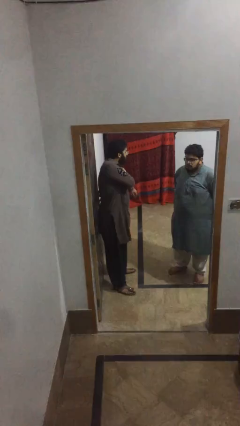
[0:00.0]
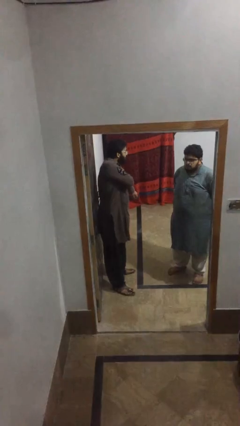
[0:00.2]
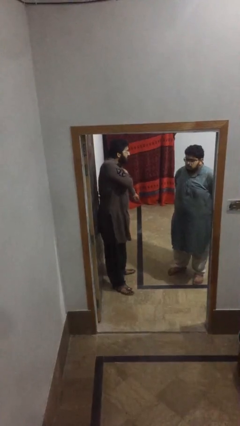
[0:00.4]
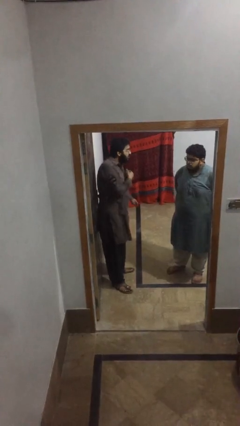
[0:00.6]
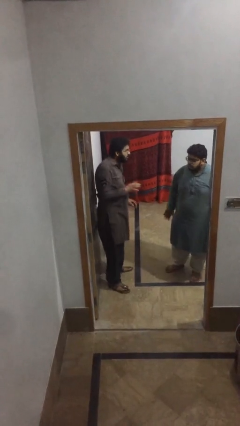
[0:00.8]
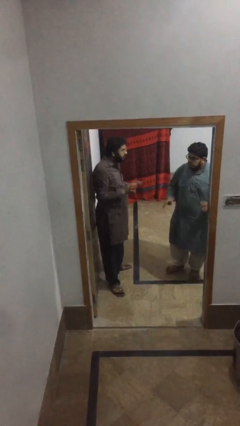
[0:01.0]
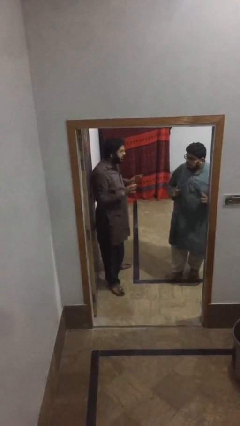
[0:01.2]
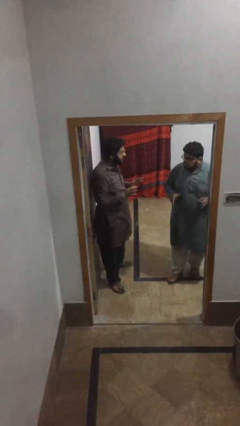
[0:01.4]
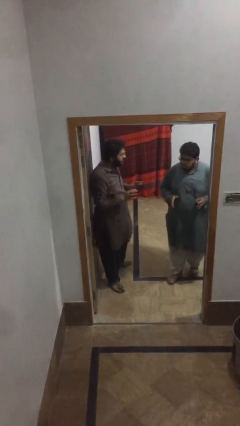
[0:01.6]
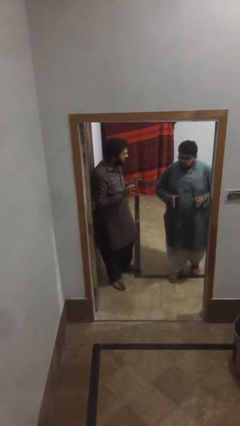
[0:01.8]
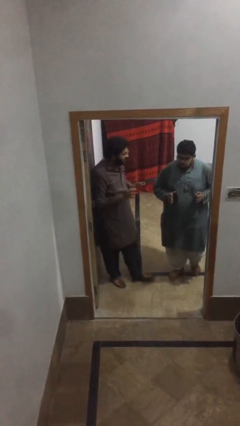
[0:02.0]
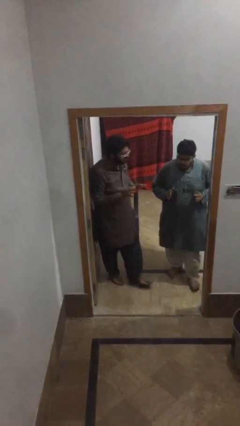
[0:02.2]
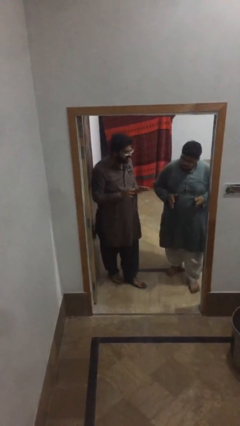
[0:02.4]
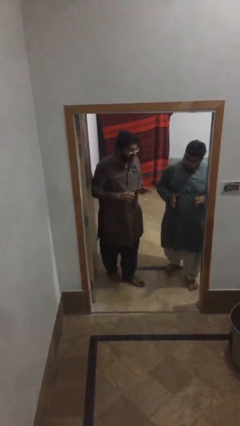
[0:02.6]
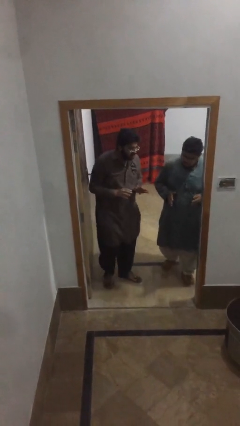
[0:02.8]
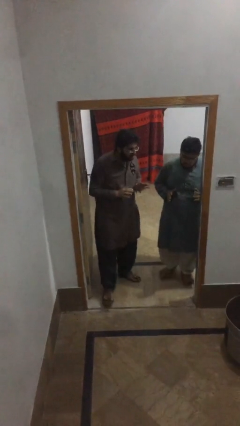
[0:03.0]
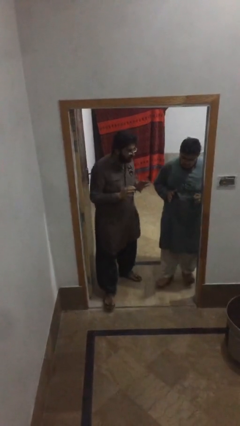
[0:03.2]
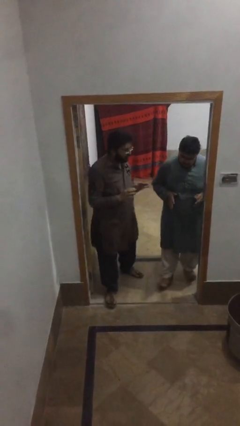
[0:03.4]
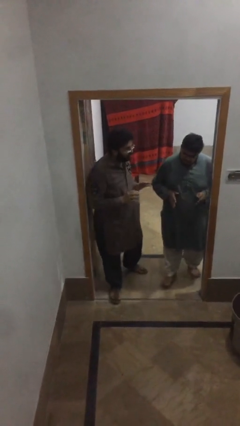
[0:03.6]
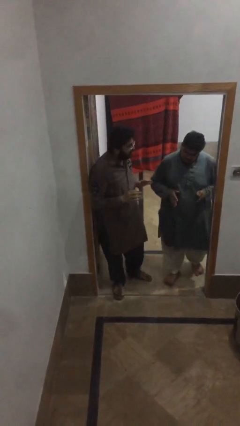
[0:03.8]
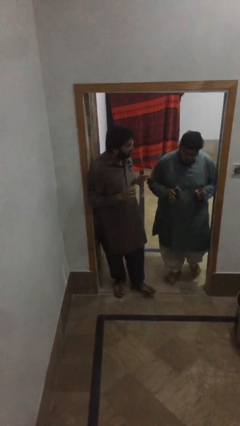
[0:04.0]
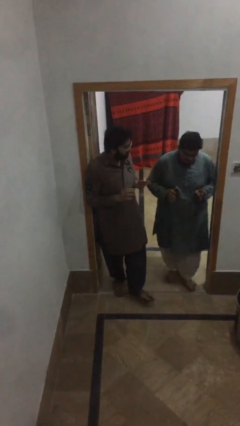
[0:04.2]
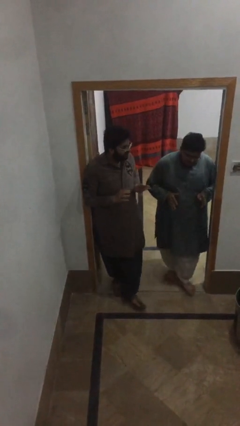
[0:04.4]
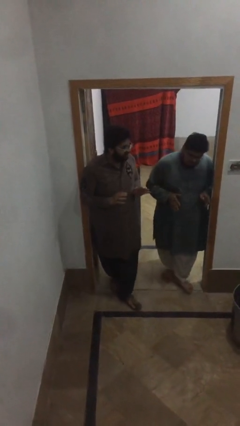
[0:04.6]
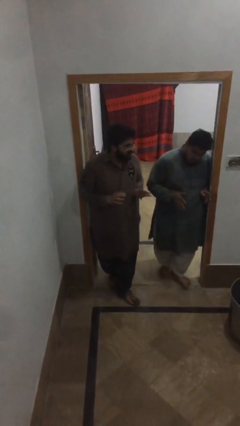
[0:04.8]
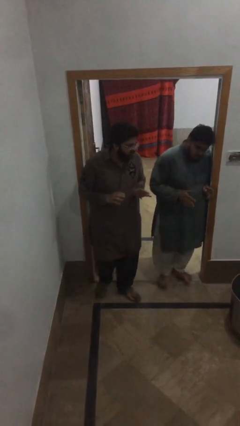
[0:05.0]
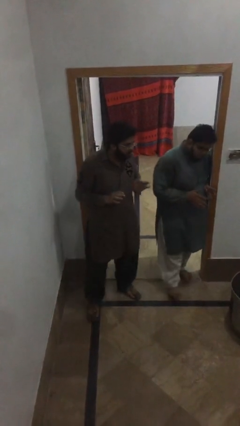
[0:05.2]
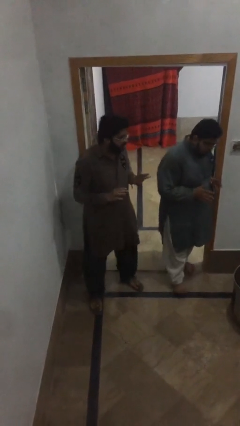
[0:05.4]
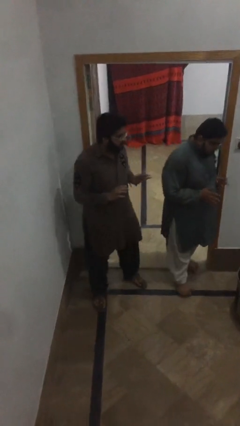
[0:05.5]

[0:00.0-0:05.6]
person talks to person

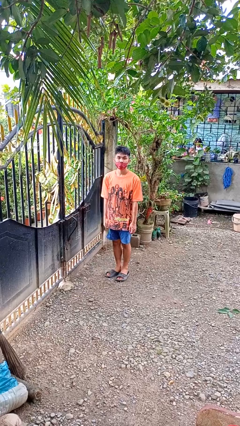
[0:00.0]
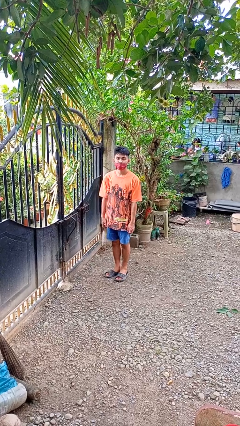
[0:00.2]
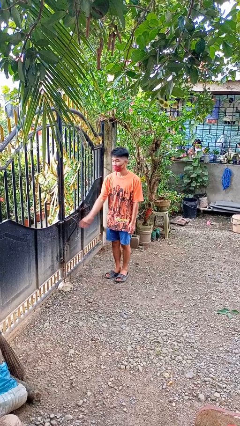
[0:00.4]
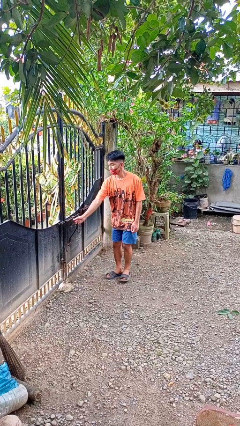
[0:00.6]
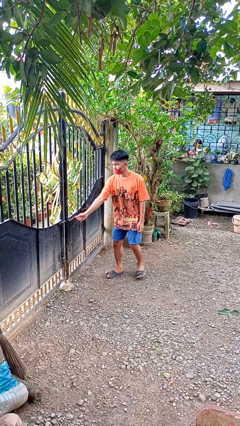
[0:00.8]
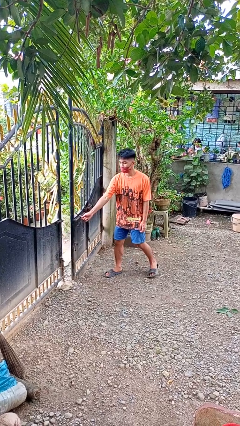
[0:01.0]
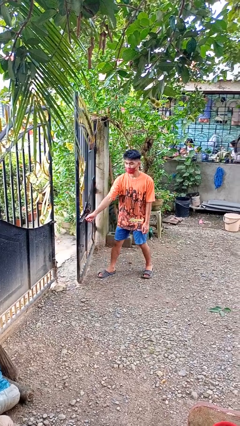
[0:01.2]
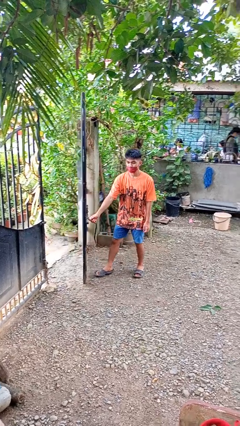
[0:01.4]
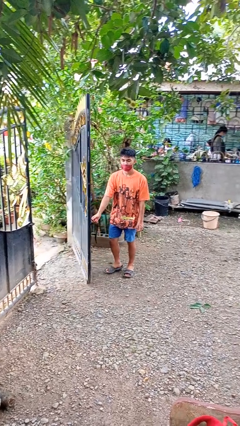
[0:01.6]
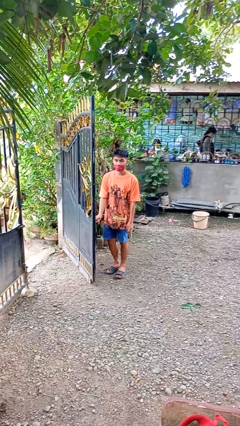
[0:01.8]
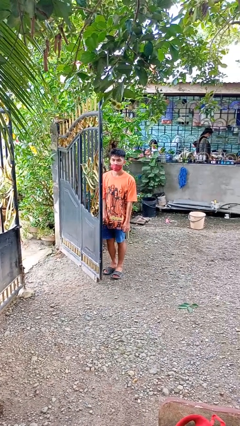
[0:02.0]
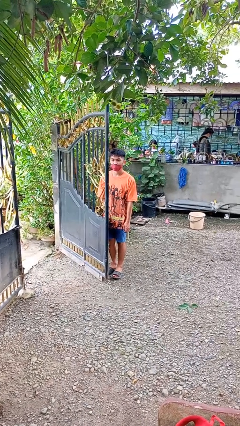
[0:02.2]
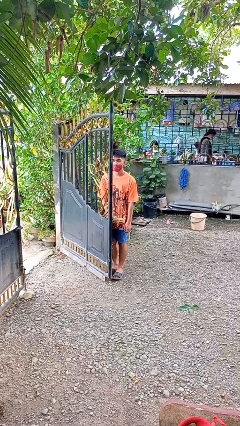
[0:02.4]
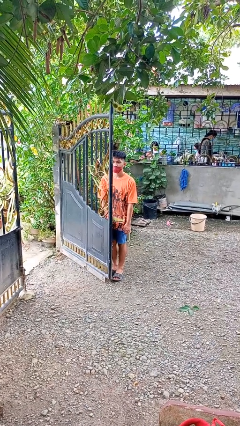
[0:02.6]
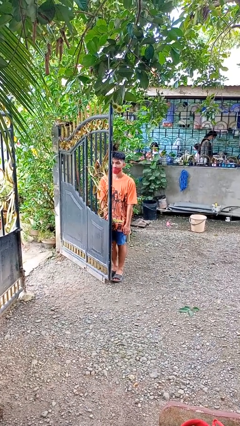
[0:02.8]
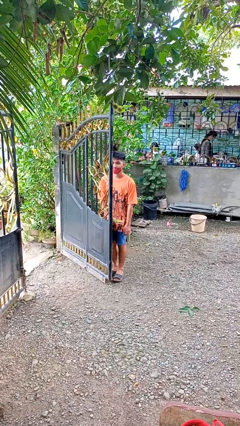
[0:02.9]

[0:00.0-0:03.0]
person opens gate

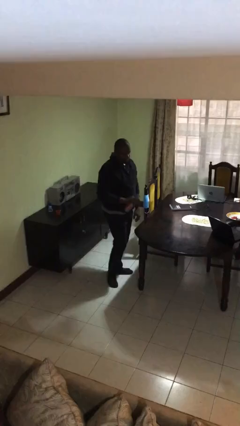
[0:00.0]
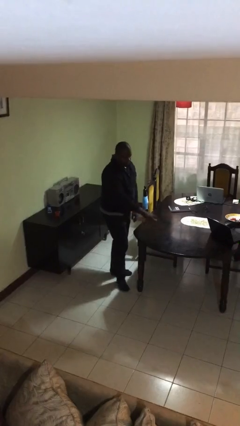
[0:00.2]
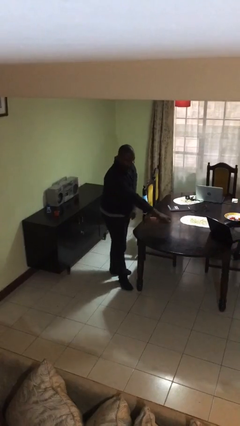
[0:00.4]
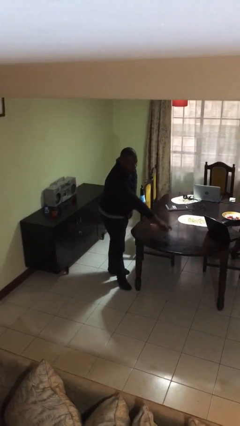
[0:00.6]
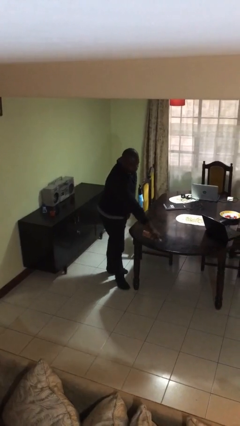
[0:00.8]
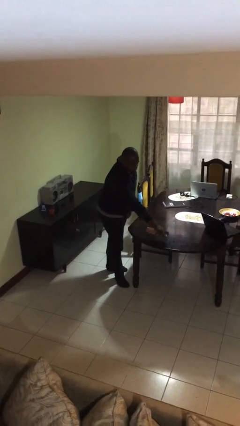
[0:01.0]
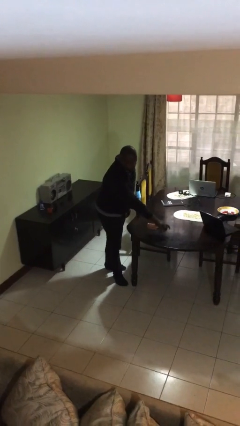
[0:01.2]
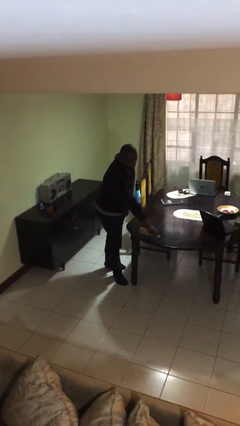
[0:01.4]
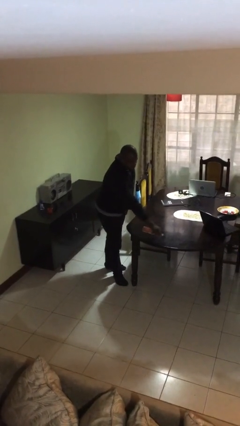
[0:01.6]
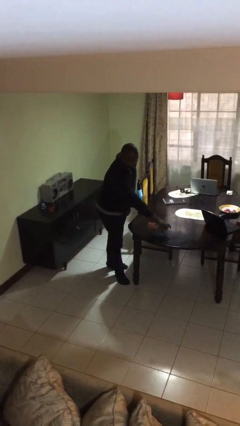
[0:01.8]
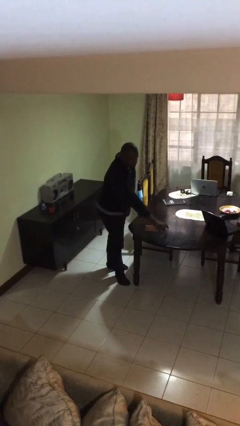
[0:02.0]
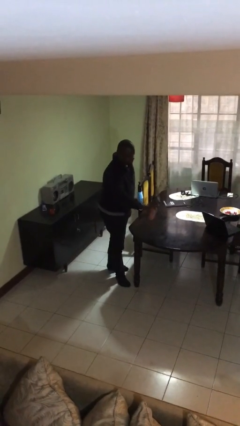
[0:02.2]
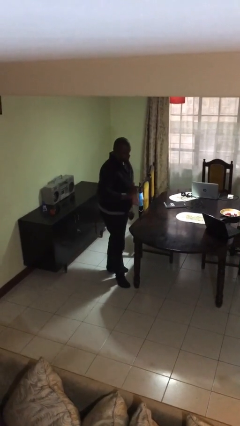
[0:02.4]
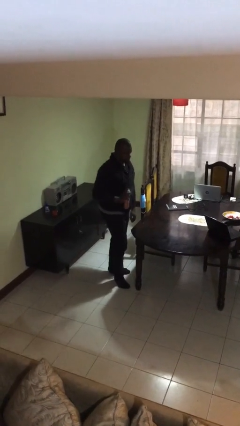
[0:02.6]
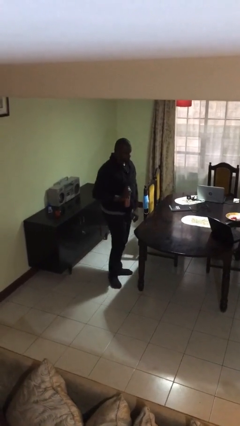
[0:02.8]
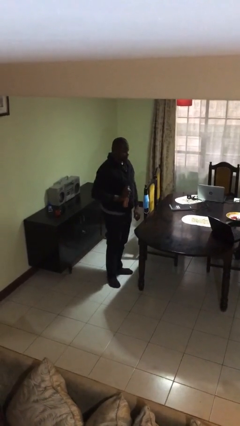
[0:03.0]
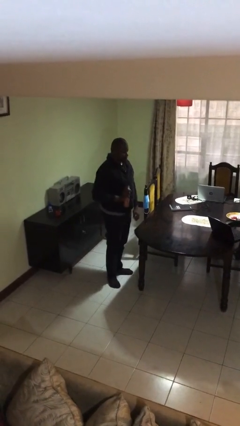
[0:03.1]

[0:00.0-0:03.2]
person sprays from bottle

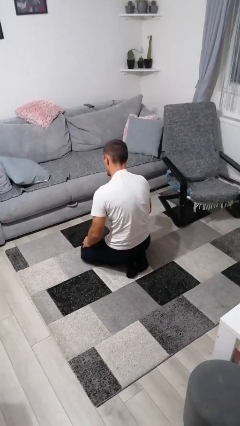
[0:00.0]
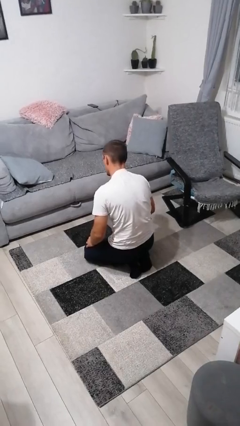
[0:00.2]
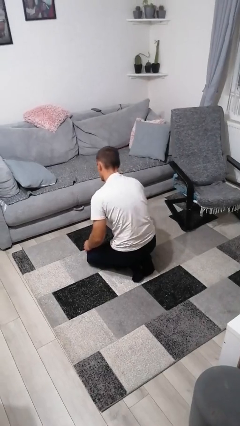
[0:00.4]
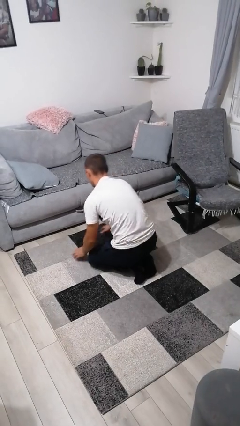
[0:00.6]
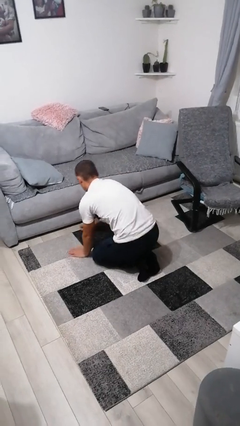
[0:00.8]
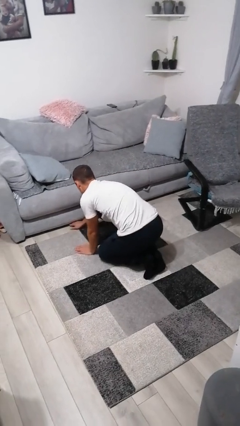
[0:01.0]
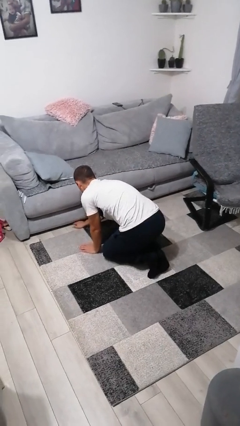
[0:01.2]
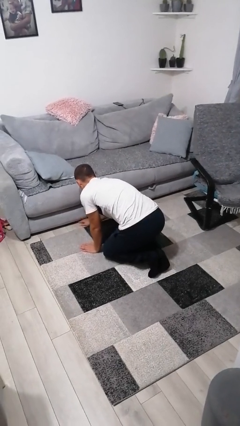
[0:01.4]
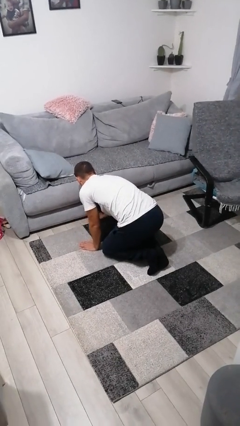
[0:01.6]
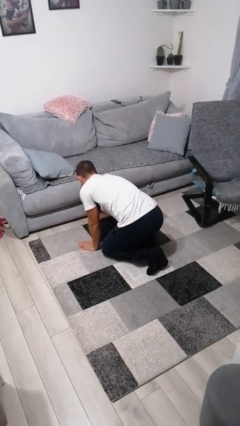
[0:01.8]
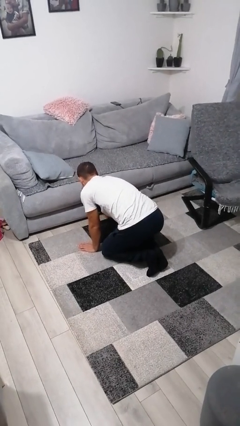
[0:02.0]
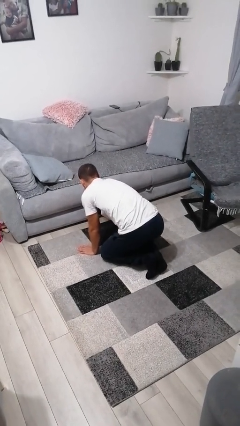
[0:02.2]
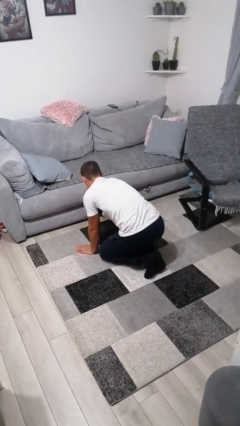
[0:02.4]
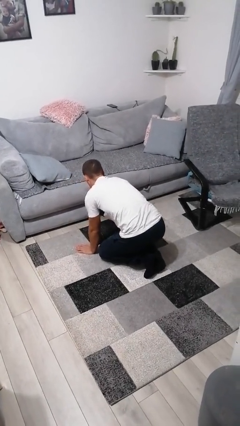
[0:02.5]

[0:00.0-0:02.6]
person searches under couch

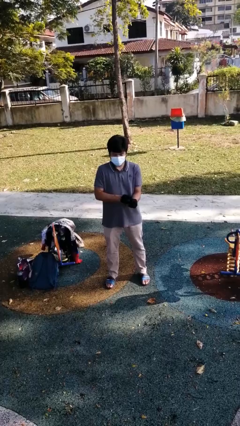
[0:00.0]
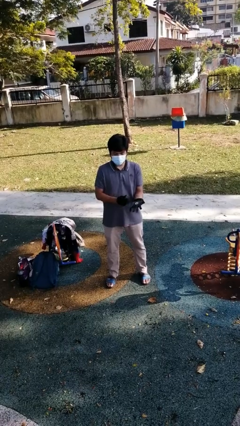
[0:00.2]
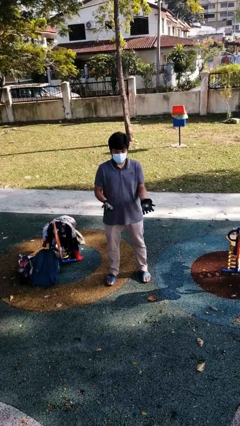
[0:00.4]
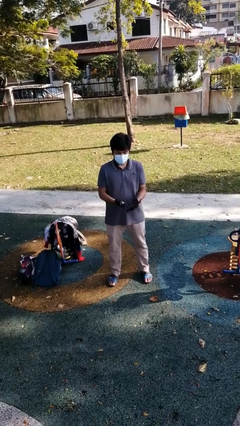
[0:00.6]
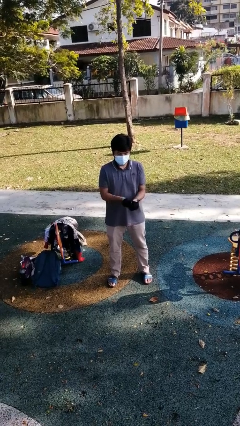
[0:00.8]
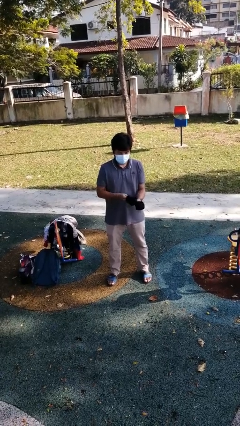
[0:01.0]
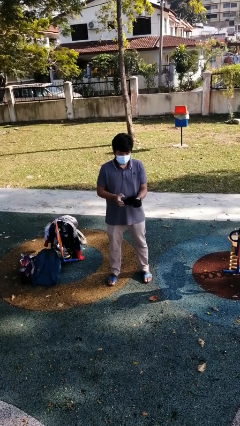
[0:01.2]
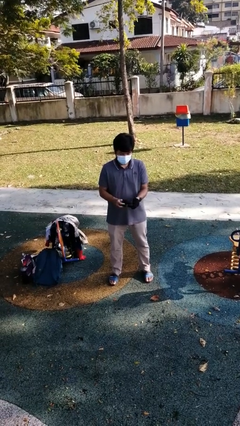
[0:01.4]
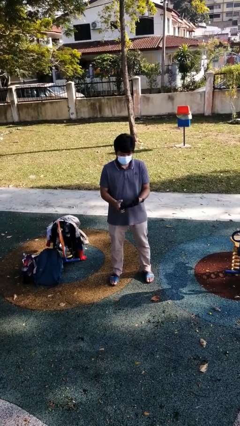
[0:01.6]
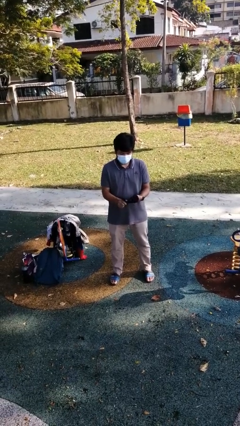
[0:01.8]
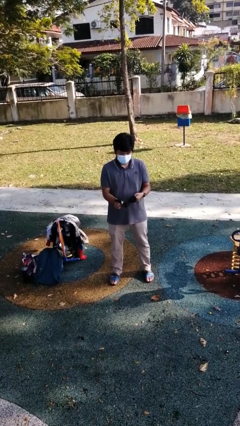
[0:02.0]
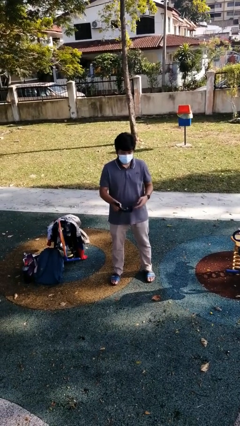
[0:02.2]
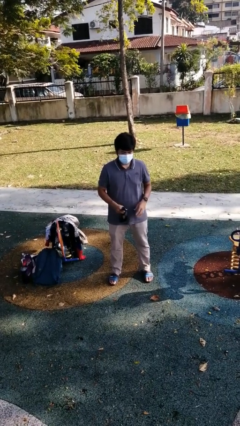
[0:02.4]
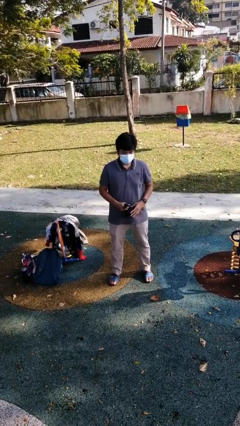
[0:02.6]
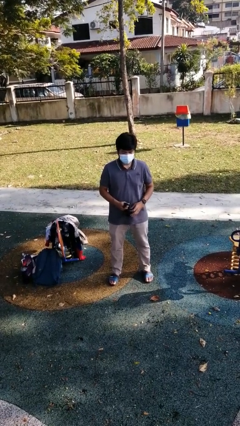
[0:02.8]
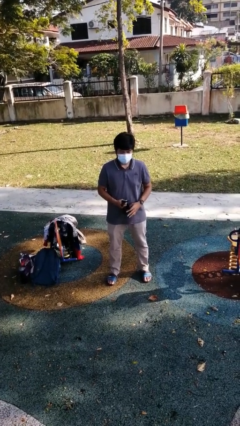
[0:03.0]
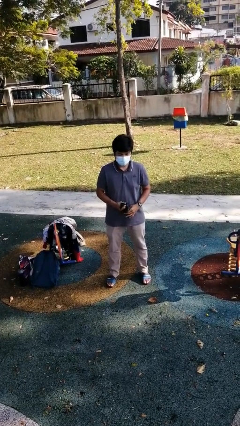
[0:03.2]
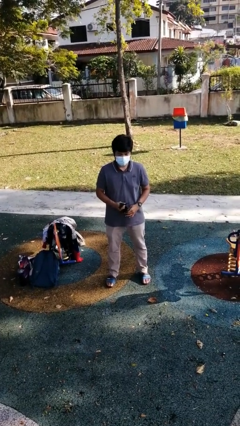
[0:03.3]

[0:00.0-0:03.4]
person takes off gloves
